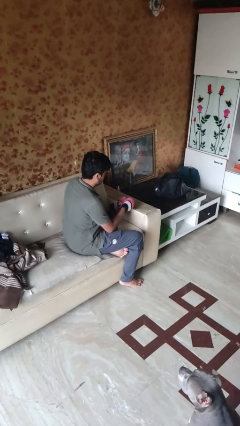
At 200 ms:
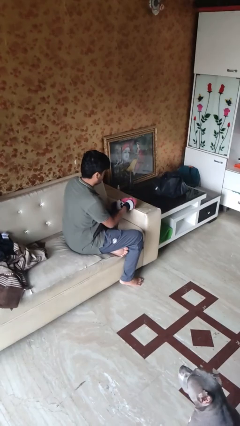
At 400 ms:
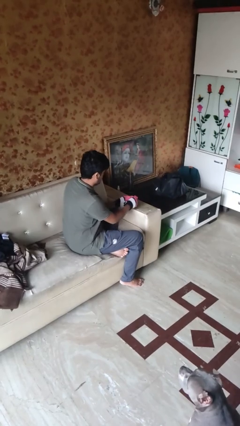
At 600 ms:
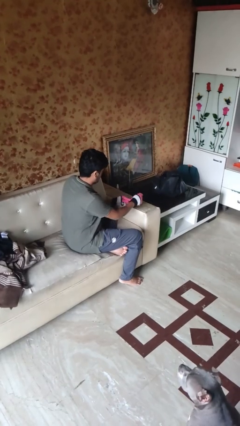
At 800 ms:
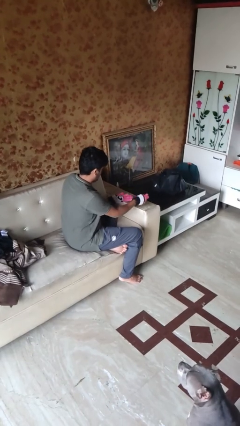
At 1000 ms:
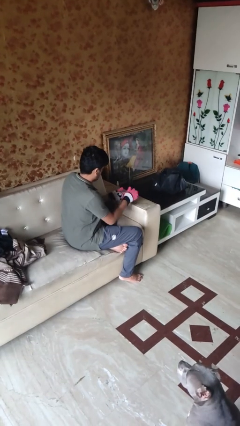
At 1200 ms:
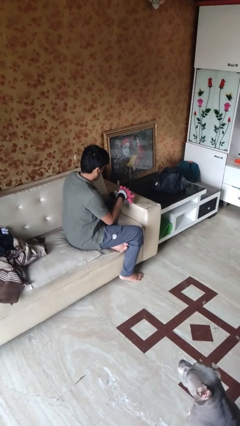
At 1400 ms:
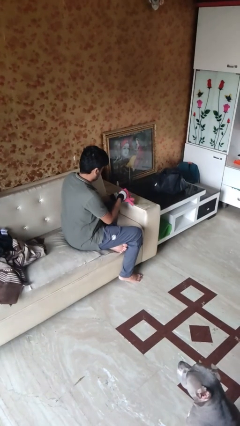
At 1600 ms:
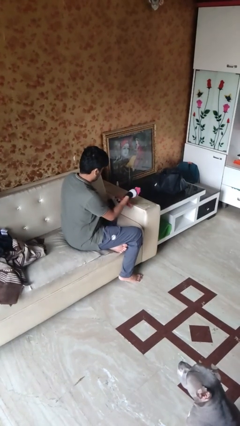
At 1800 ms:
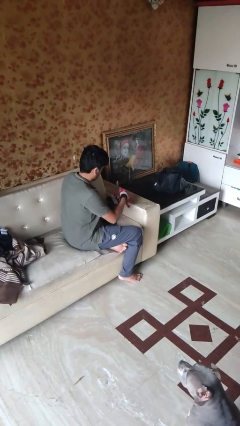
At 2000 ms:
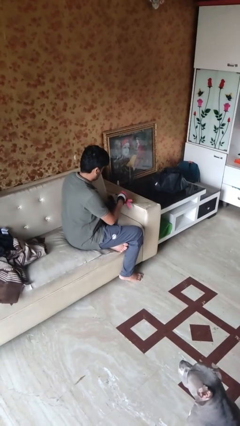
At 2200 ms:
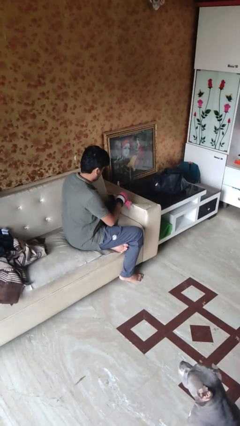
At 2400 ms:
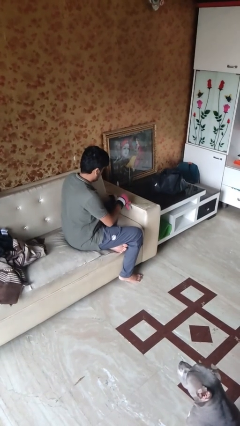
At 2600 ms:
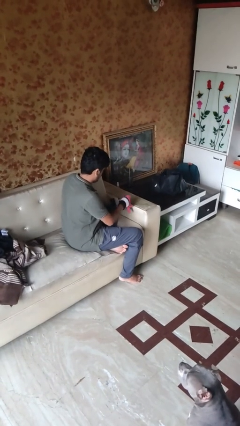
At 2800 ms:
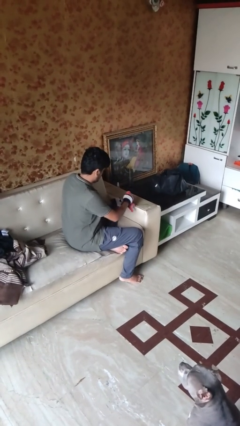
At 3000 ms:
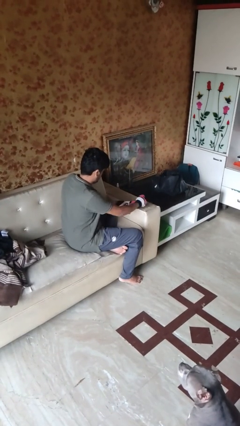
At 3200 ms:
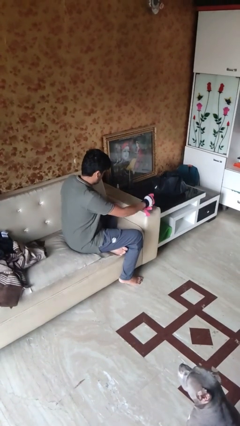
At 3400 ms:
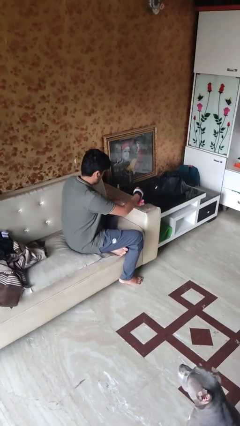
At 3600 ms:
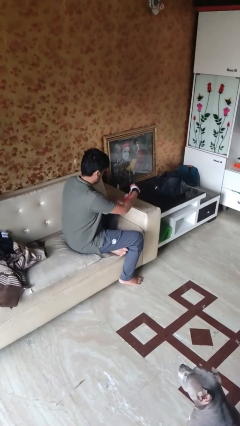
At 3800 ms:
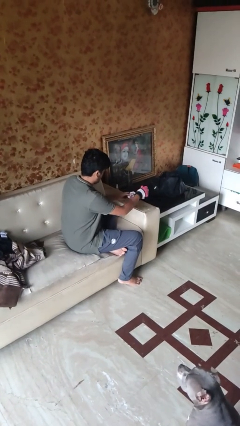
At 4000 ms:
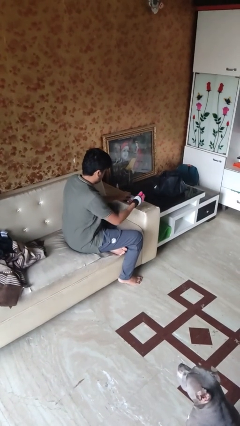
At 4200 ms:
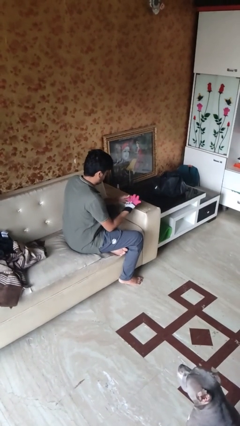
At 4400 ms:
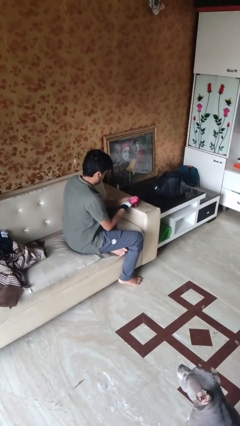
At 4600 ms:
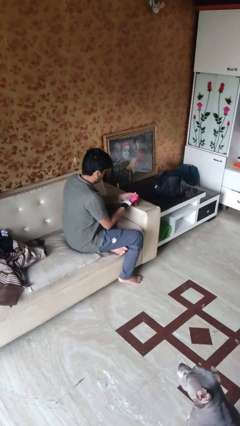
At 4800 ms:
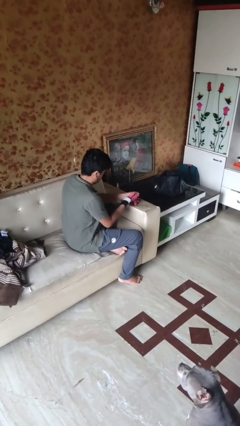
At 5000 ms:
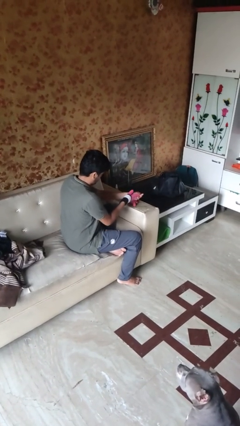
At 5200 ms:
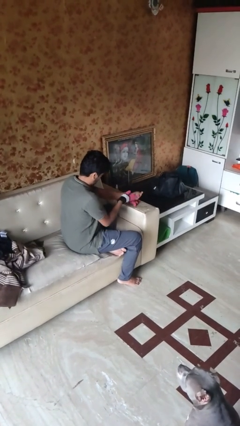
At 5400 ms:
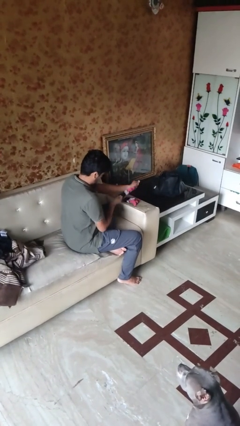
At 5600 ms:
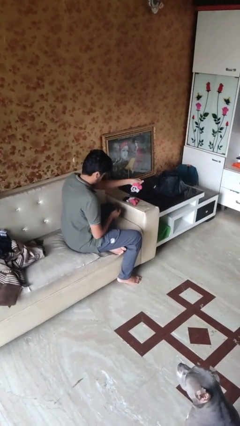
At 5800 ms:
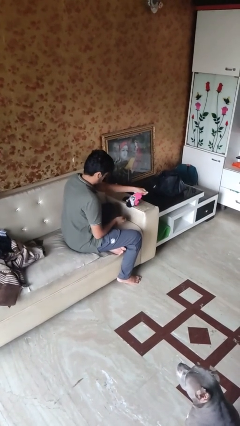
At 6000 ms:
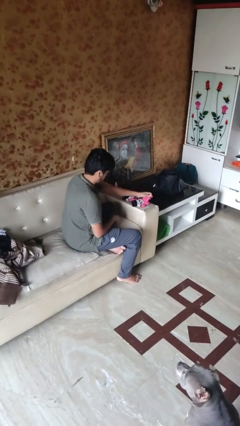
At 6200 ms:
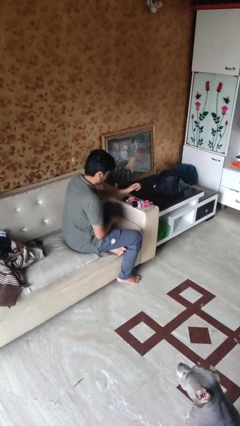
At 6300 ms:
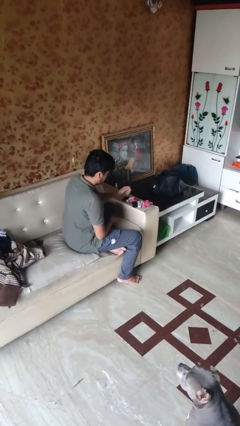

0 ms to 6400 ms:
person takes off gloves

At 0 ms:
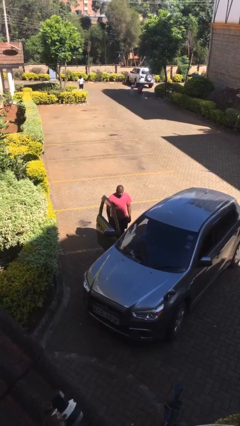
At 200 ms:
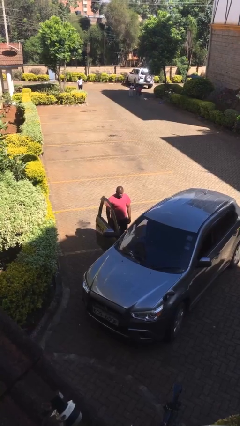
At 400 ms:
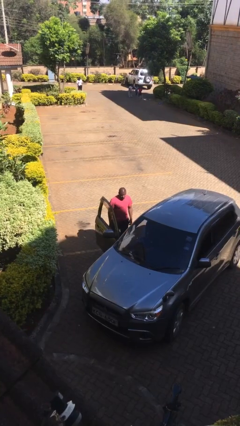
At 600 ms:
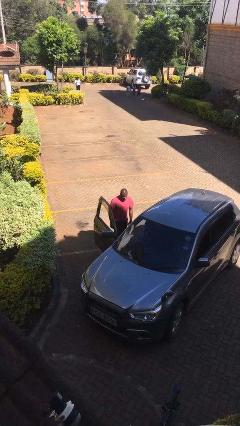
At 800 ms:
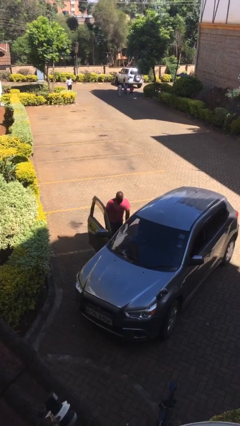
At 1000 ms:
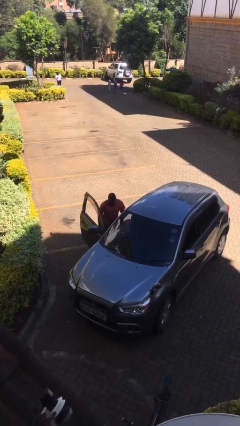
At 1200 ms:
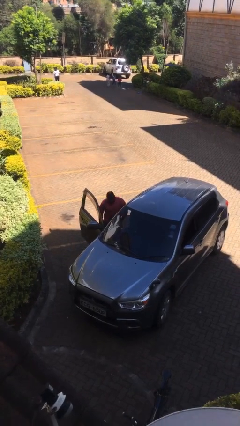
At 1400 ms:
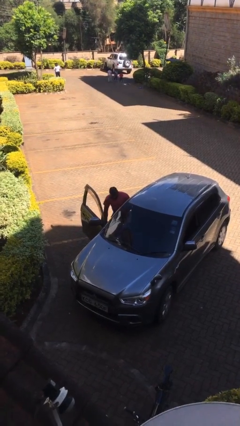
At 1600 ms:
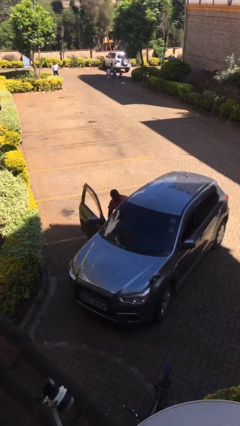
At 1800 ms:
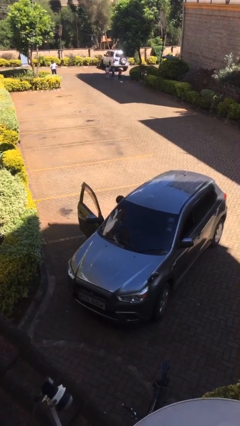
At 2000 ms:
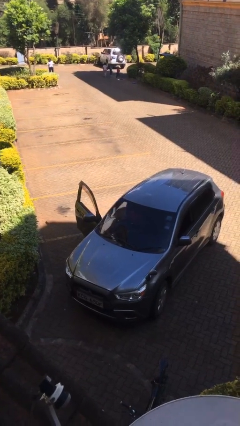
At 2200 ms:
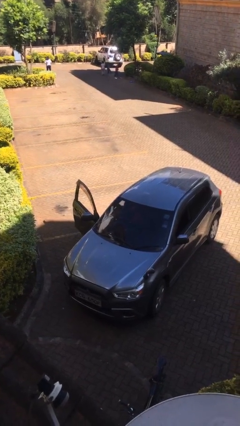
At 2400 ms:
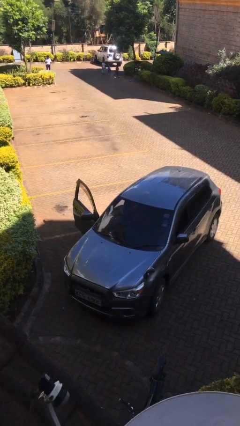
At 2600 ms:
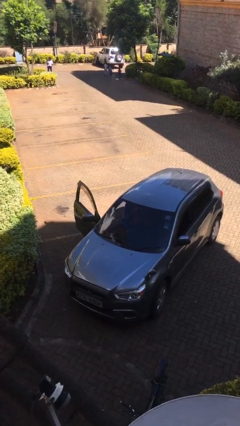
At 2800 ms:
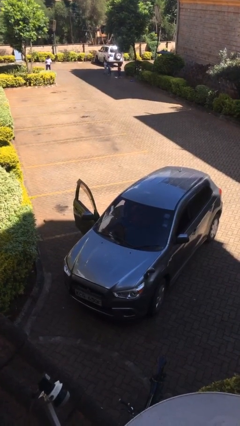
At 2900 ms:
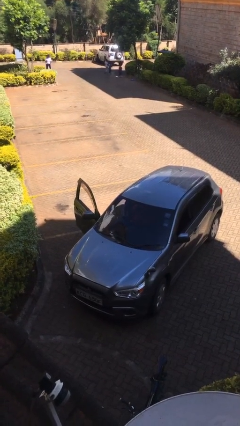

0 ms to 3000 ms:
person enters car

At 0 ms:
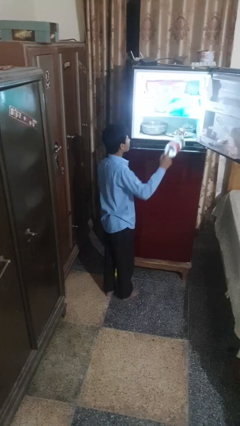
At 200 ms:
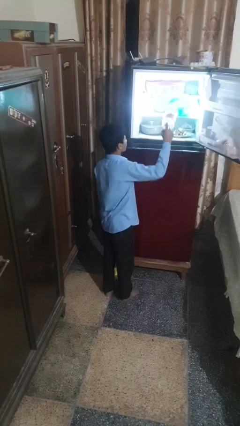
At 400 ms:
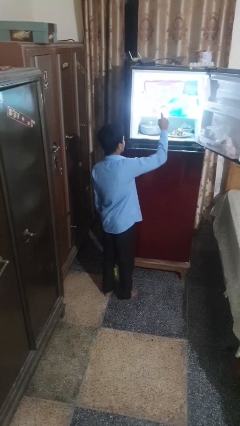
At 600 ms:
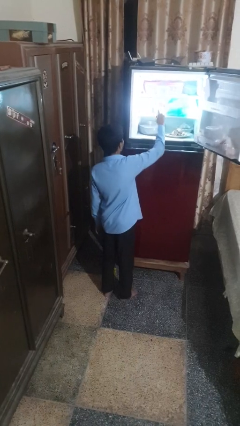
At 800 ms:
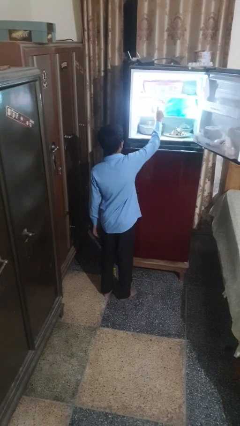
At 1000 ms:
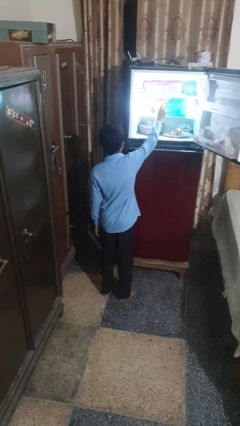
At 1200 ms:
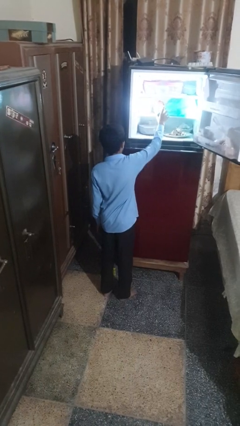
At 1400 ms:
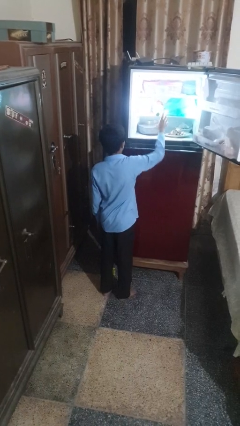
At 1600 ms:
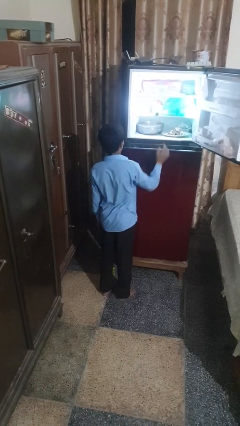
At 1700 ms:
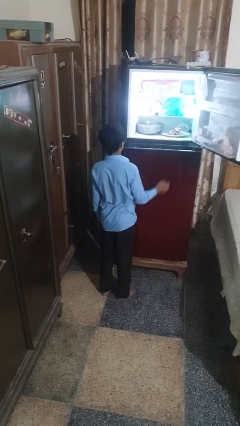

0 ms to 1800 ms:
person puts object into refrigerator

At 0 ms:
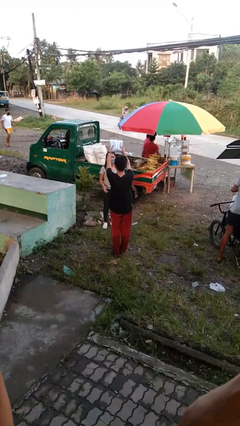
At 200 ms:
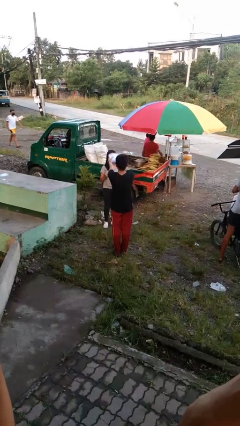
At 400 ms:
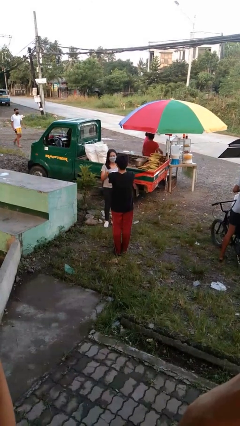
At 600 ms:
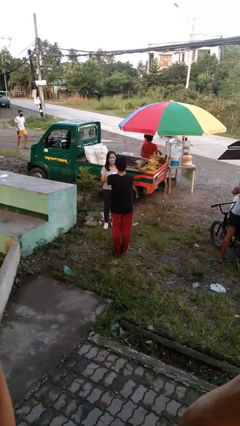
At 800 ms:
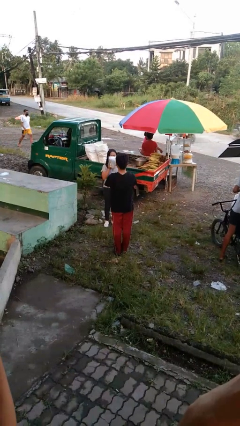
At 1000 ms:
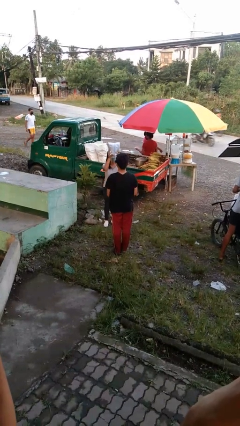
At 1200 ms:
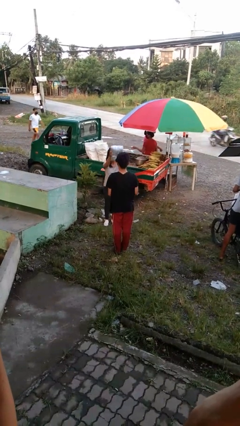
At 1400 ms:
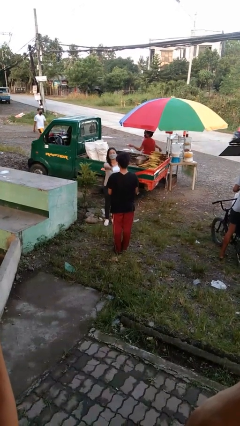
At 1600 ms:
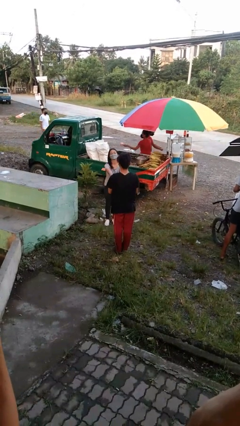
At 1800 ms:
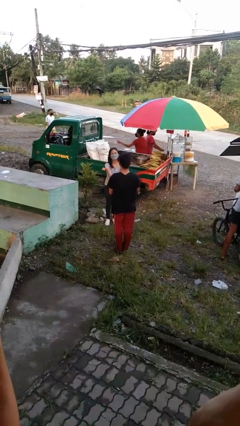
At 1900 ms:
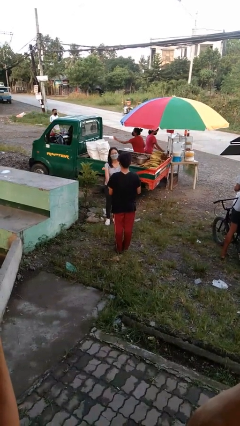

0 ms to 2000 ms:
person transfers object to person

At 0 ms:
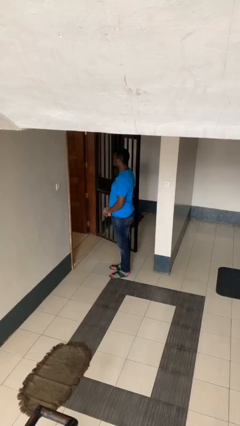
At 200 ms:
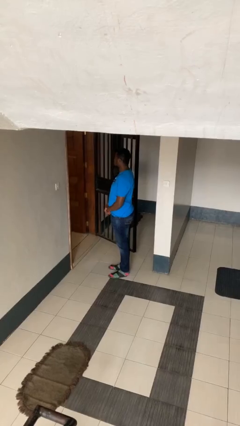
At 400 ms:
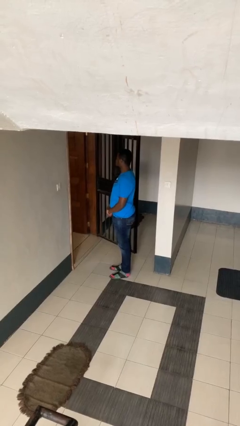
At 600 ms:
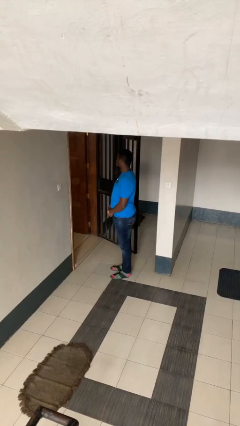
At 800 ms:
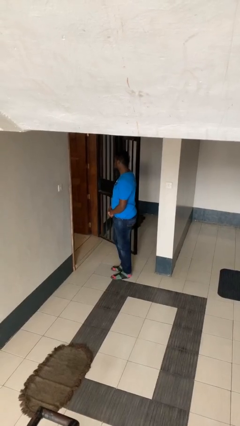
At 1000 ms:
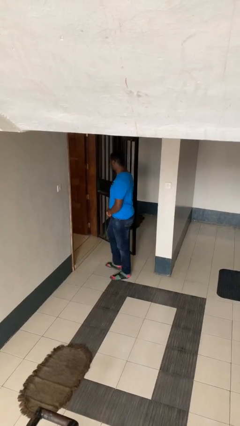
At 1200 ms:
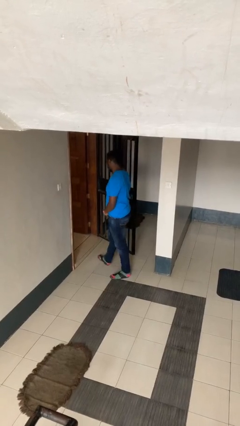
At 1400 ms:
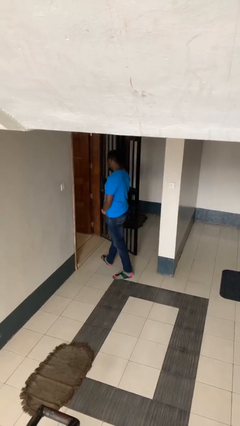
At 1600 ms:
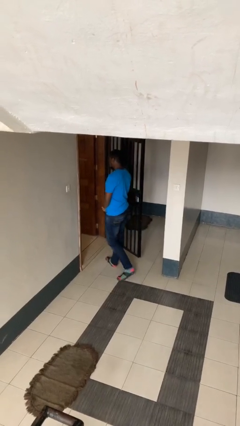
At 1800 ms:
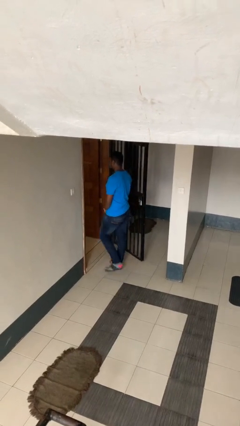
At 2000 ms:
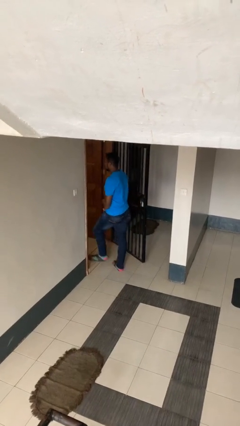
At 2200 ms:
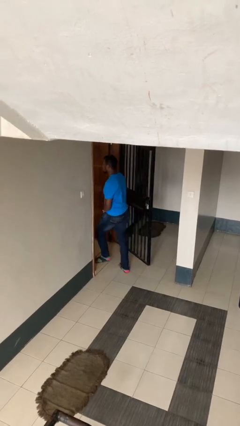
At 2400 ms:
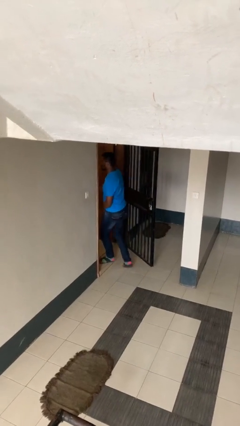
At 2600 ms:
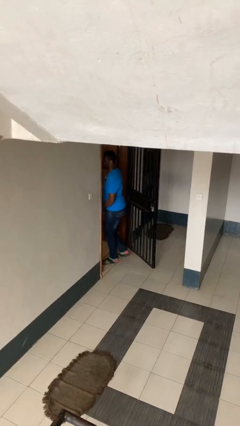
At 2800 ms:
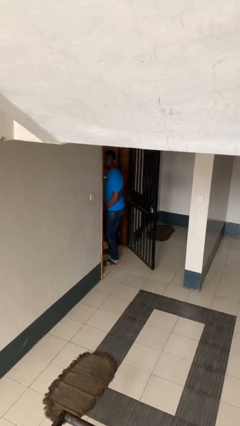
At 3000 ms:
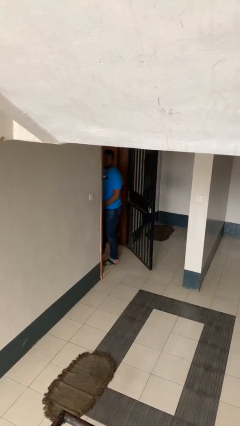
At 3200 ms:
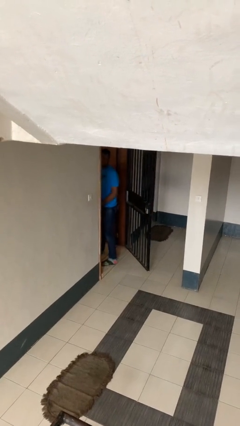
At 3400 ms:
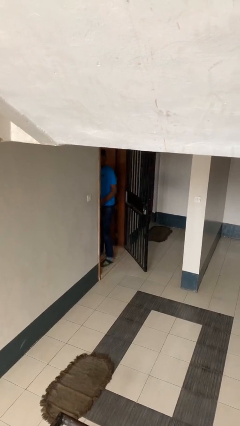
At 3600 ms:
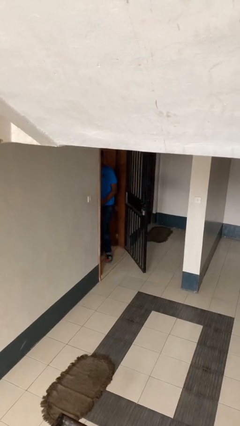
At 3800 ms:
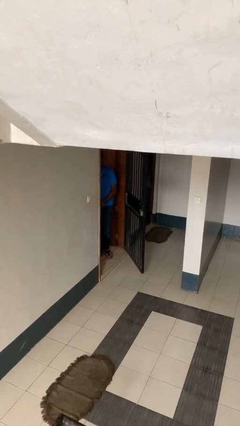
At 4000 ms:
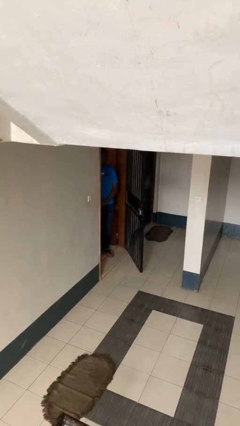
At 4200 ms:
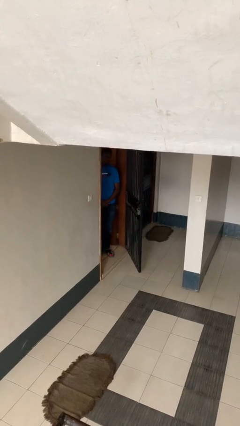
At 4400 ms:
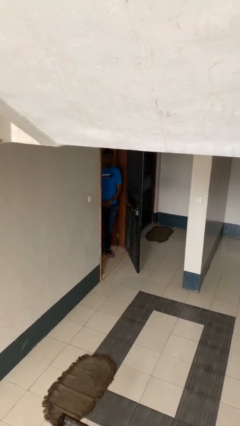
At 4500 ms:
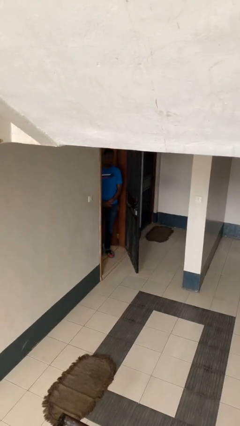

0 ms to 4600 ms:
person exits scene through structure
